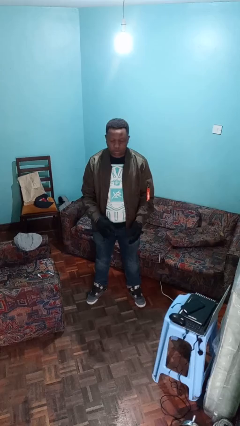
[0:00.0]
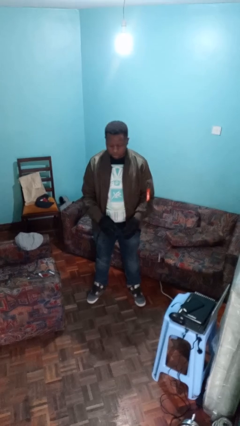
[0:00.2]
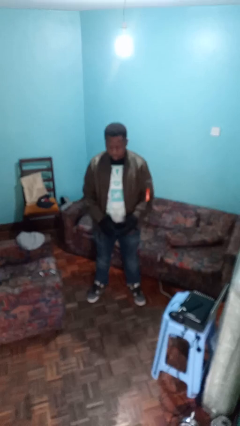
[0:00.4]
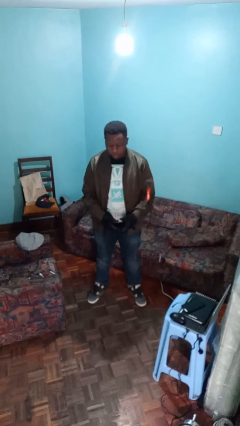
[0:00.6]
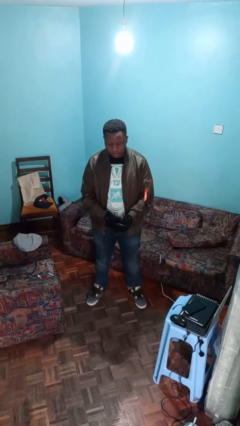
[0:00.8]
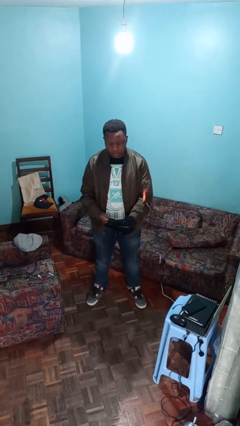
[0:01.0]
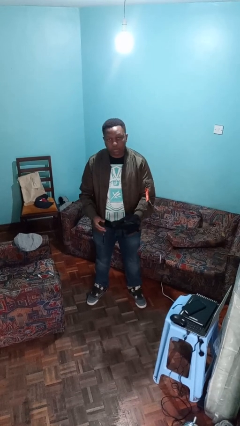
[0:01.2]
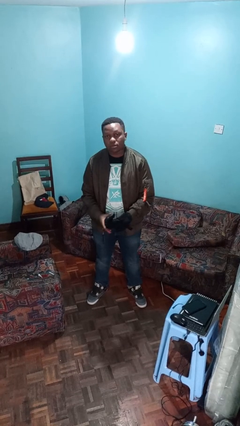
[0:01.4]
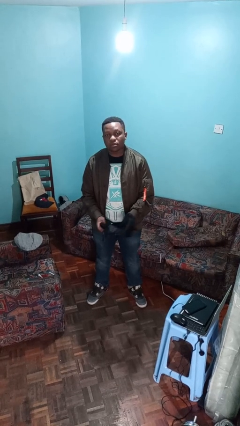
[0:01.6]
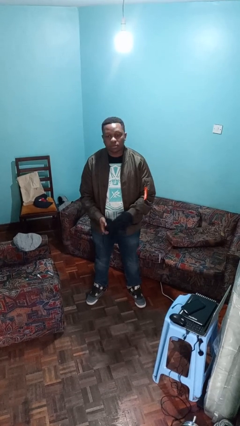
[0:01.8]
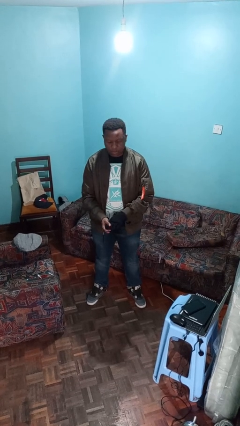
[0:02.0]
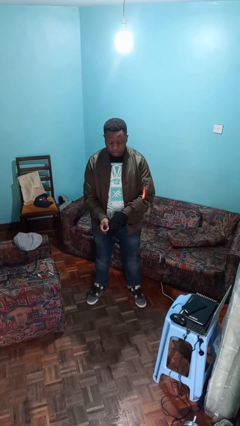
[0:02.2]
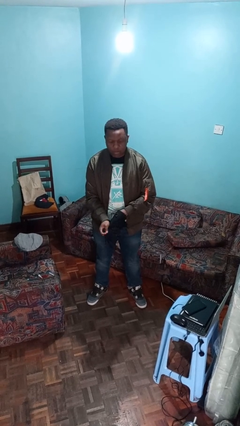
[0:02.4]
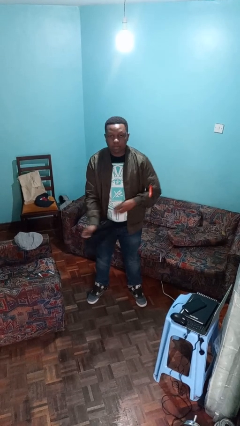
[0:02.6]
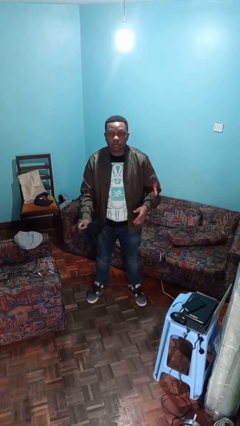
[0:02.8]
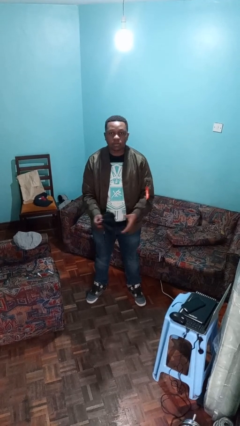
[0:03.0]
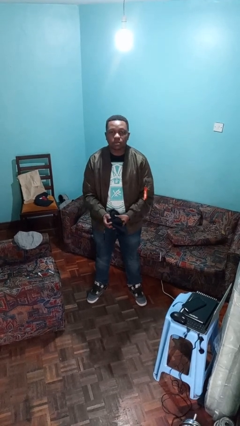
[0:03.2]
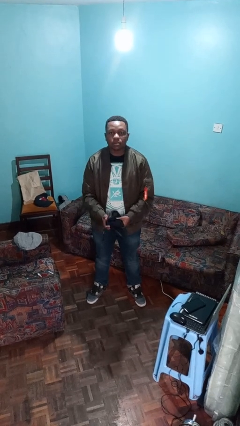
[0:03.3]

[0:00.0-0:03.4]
person takes off gloves

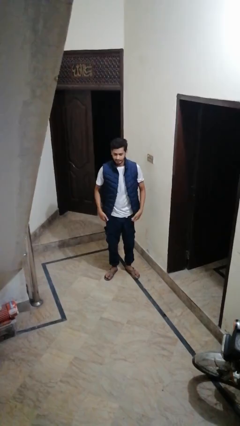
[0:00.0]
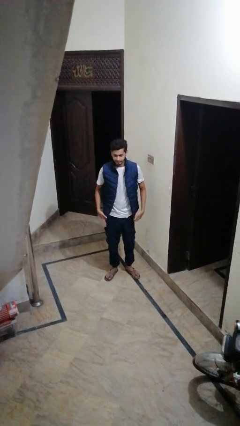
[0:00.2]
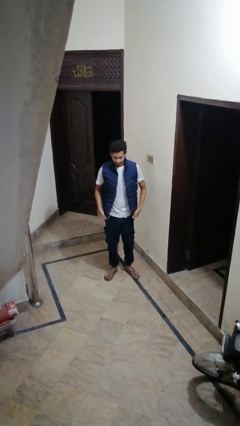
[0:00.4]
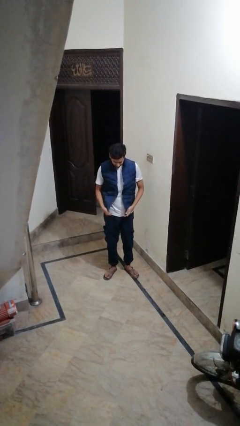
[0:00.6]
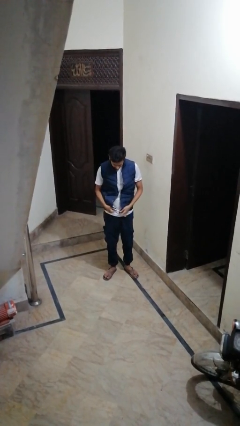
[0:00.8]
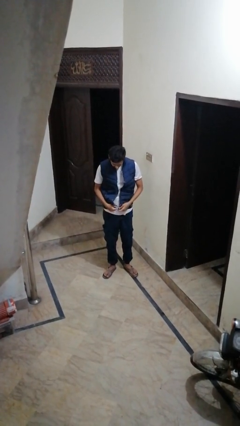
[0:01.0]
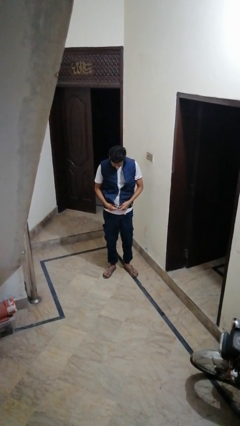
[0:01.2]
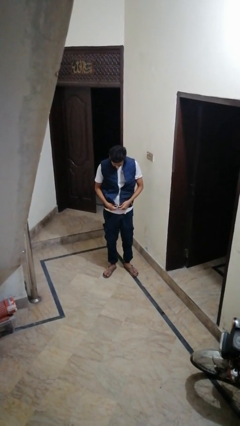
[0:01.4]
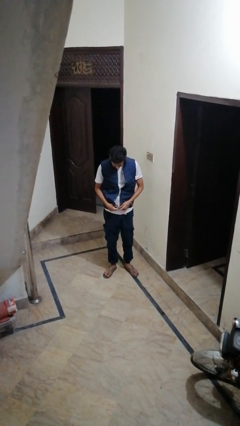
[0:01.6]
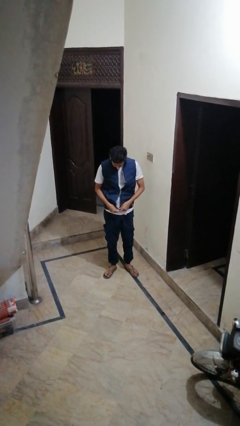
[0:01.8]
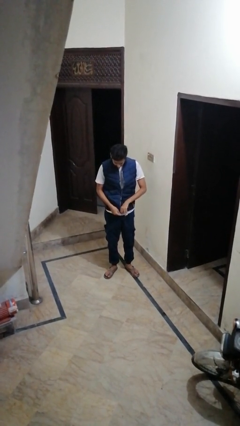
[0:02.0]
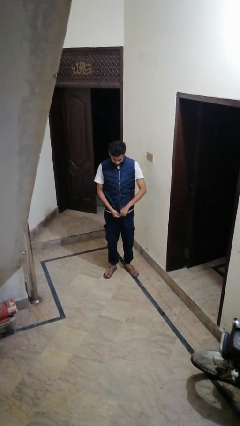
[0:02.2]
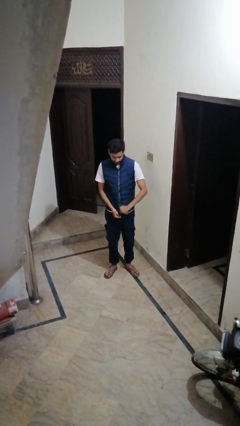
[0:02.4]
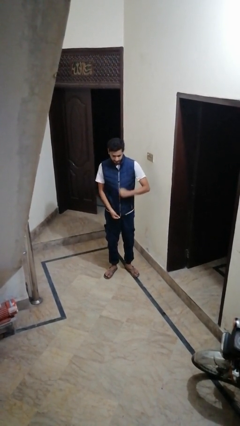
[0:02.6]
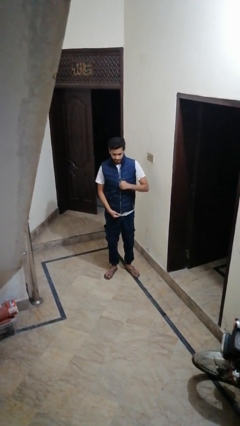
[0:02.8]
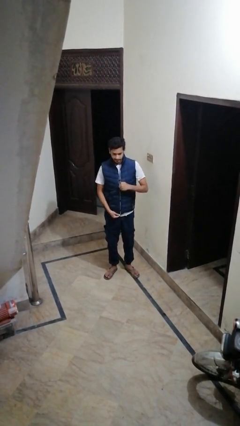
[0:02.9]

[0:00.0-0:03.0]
person zips up jacket

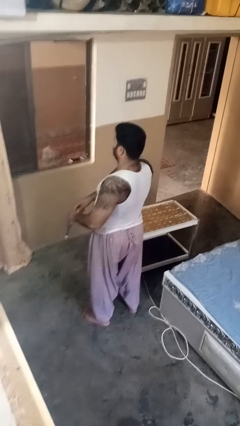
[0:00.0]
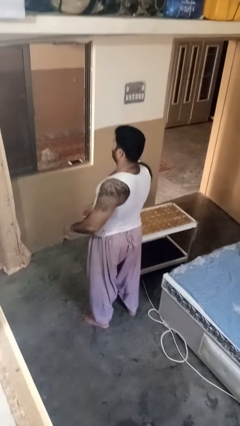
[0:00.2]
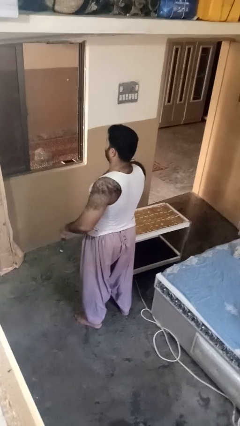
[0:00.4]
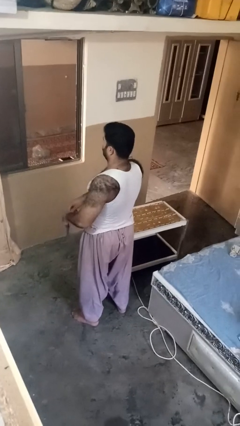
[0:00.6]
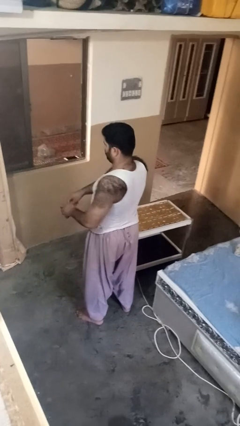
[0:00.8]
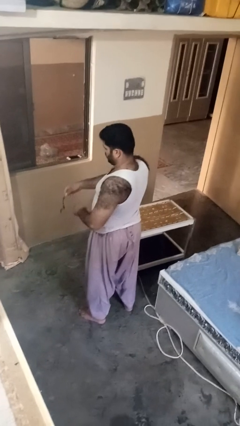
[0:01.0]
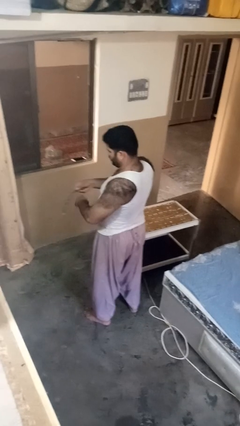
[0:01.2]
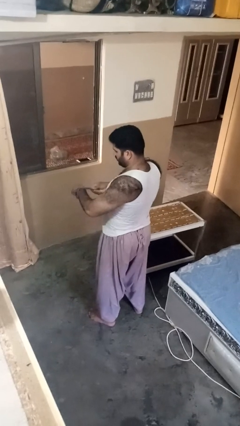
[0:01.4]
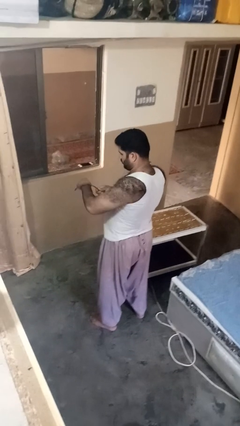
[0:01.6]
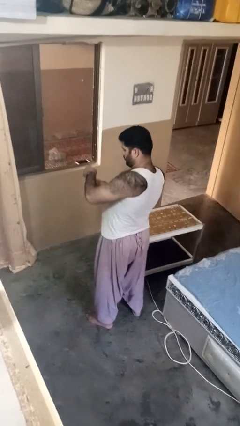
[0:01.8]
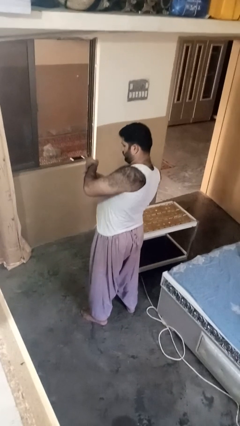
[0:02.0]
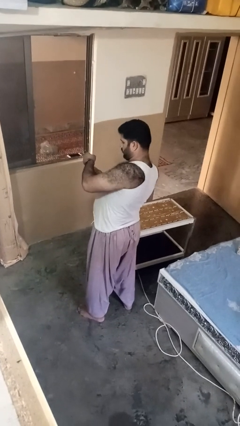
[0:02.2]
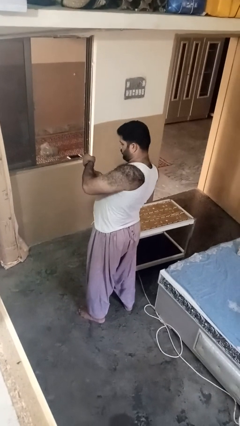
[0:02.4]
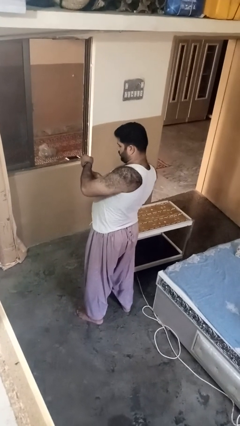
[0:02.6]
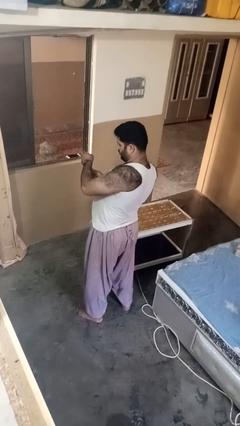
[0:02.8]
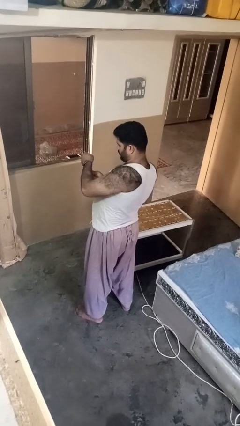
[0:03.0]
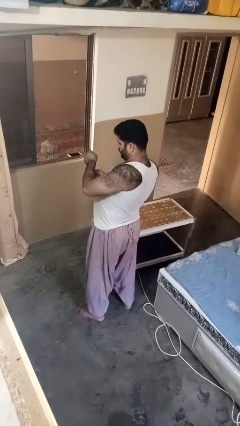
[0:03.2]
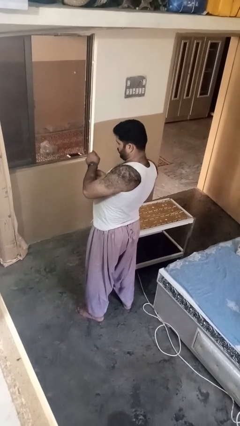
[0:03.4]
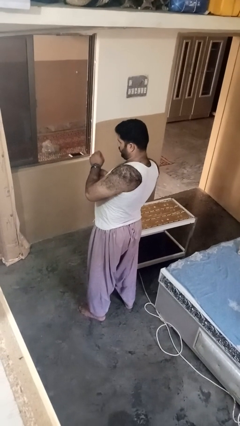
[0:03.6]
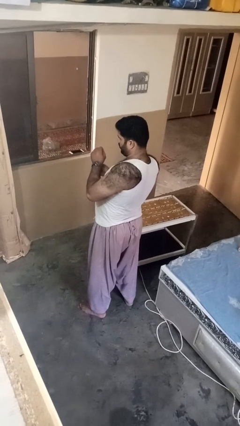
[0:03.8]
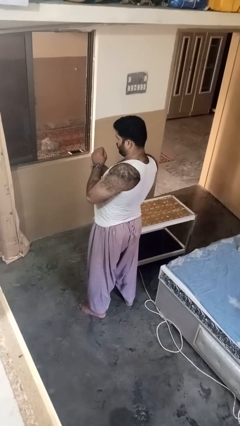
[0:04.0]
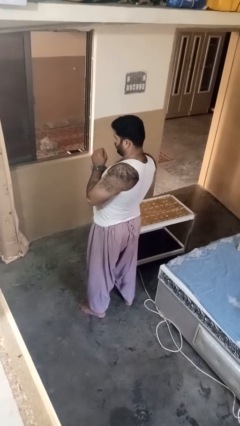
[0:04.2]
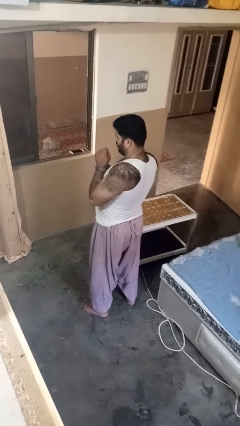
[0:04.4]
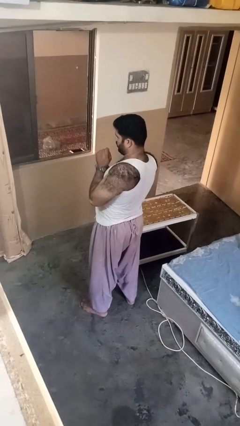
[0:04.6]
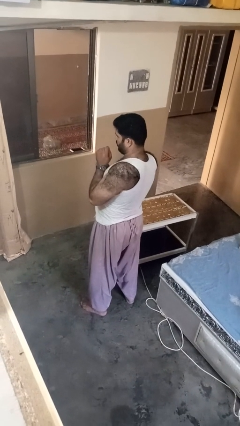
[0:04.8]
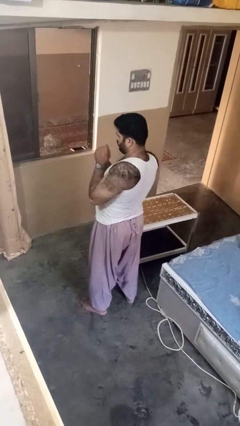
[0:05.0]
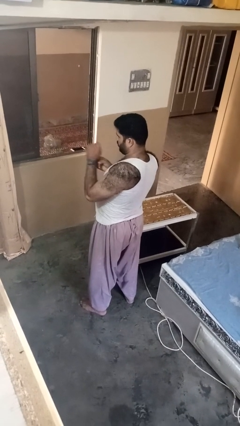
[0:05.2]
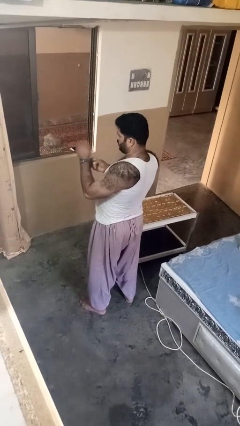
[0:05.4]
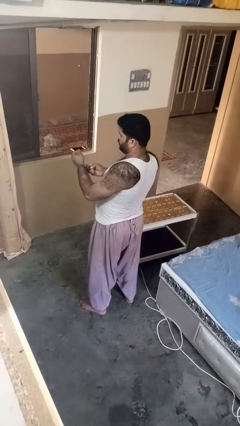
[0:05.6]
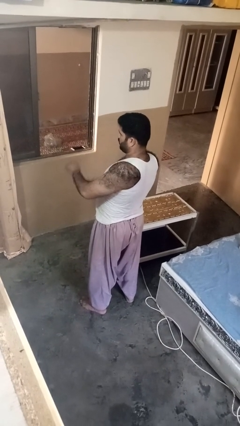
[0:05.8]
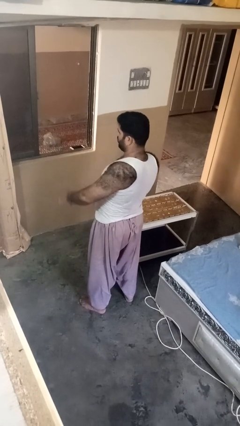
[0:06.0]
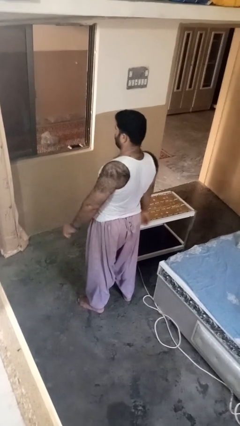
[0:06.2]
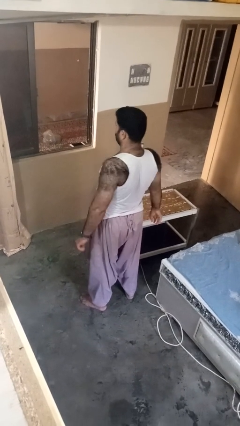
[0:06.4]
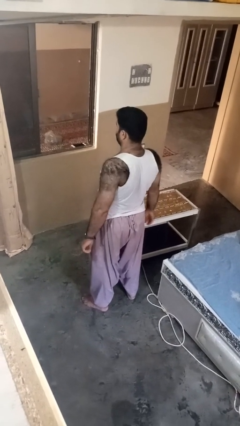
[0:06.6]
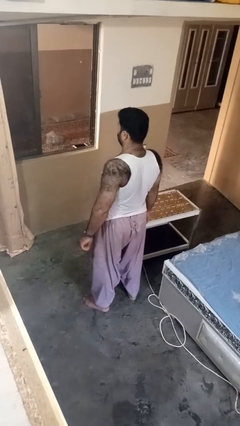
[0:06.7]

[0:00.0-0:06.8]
person puts on wristwatch

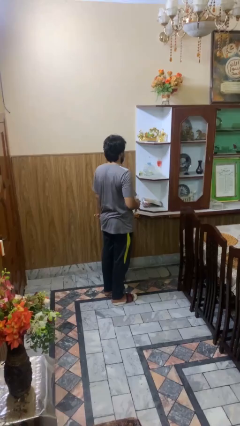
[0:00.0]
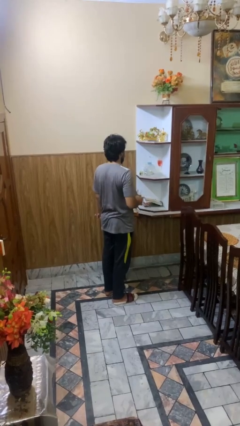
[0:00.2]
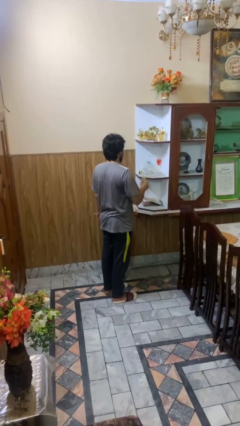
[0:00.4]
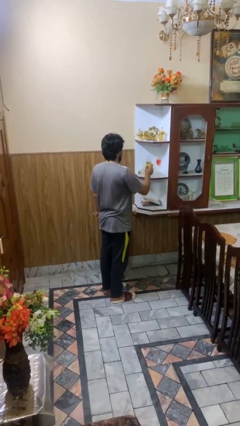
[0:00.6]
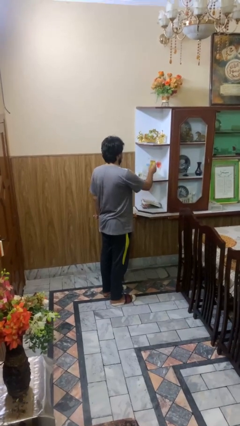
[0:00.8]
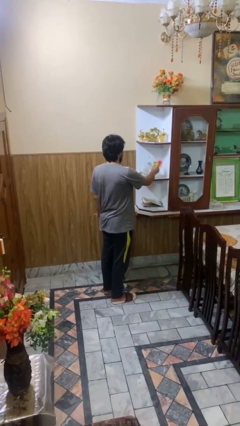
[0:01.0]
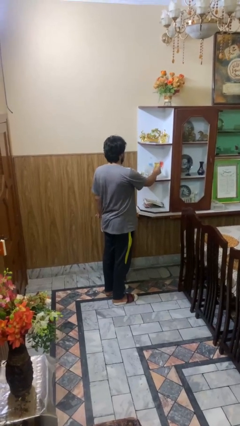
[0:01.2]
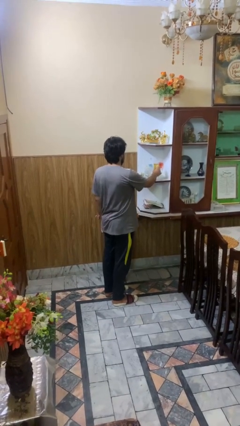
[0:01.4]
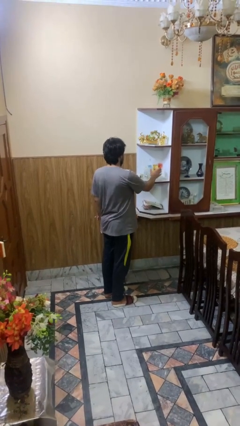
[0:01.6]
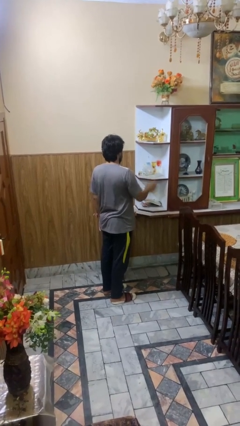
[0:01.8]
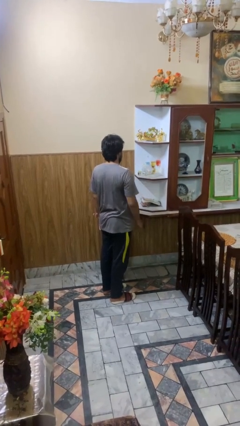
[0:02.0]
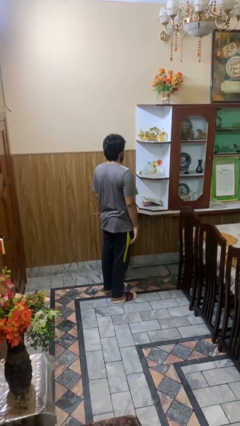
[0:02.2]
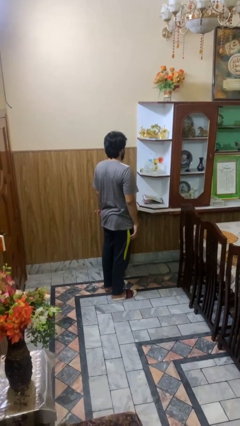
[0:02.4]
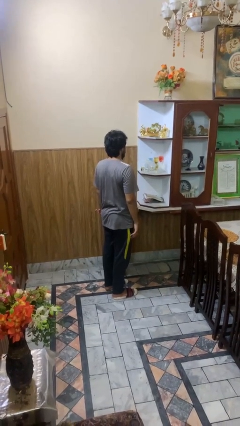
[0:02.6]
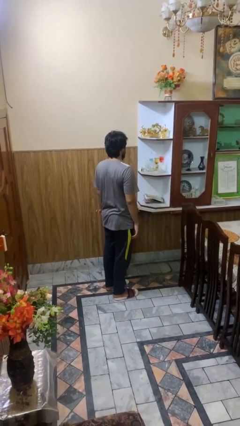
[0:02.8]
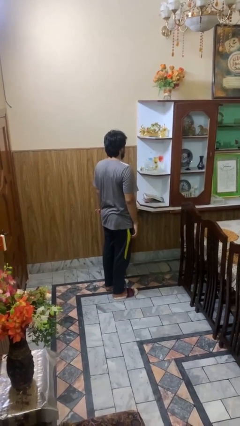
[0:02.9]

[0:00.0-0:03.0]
person puts down object into cabinet

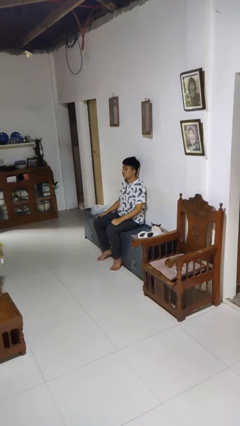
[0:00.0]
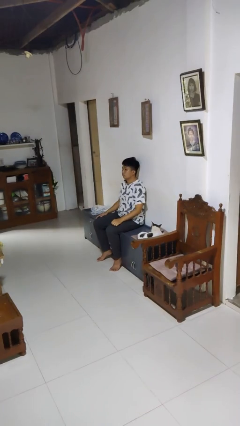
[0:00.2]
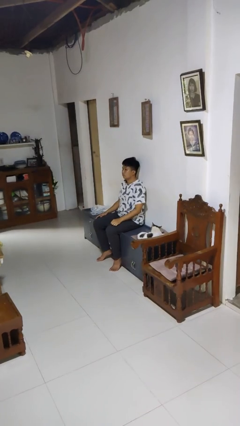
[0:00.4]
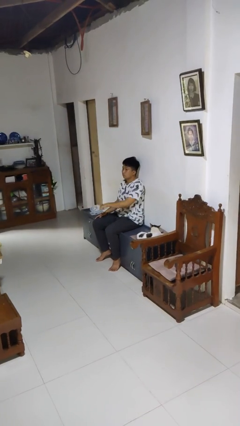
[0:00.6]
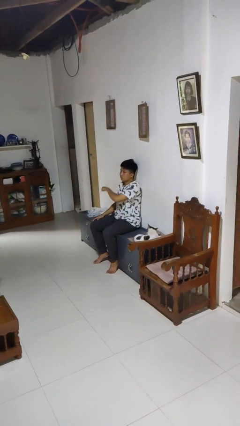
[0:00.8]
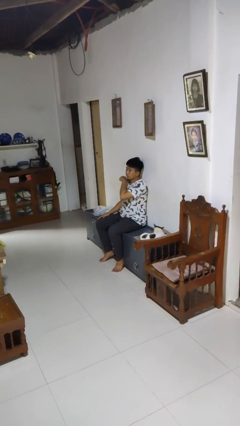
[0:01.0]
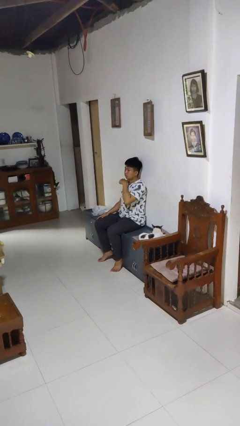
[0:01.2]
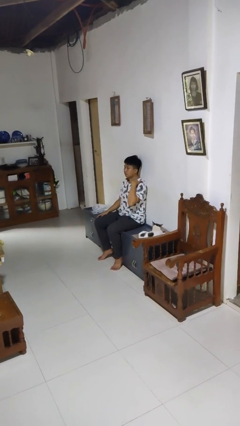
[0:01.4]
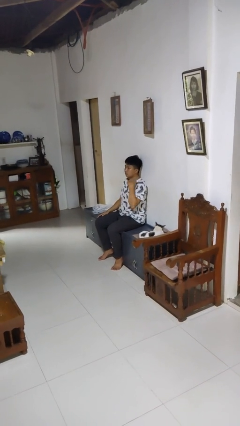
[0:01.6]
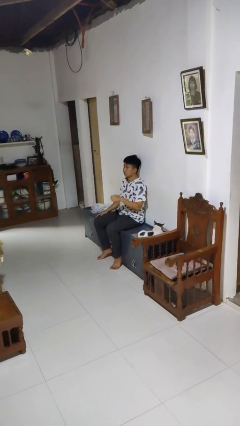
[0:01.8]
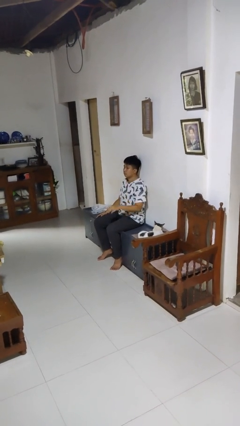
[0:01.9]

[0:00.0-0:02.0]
person gestures cut
